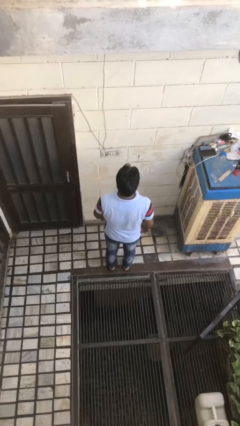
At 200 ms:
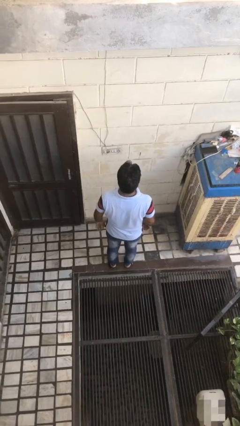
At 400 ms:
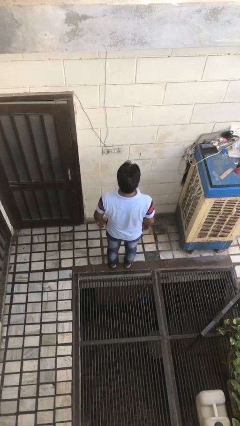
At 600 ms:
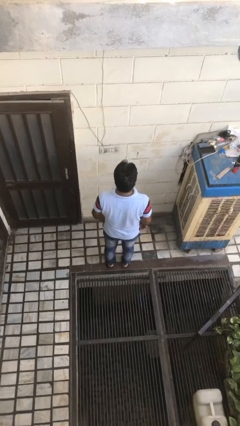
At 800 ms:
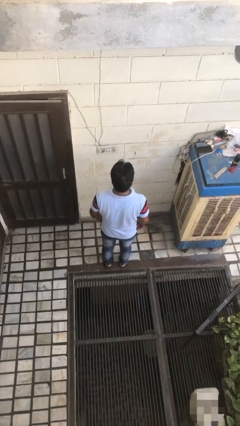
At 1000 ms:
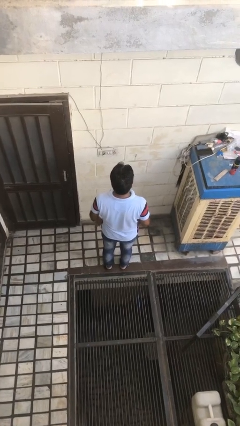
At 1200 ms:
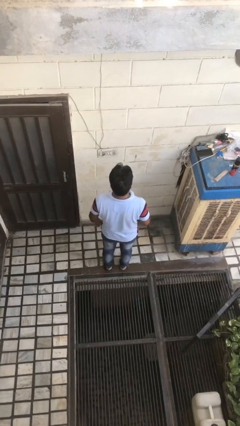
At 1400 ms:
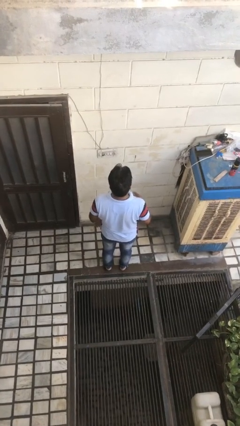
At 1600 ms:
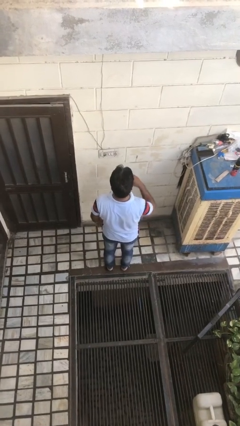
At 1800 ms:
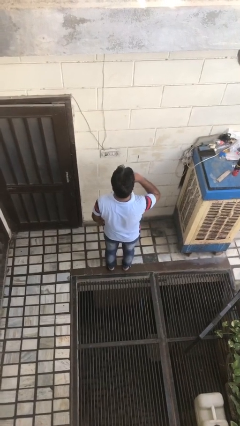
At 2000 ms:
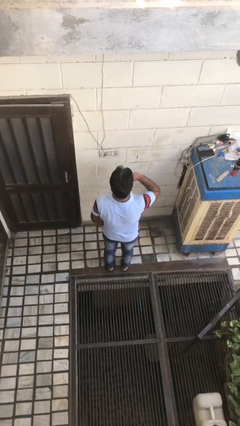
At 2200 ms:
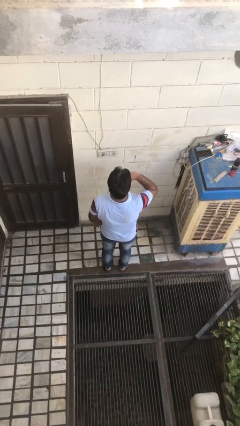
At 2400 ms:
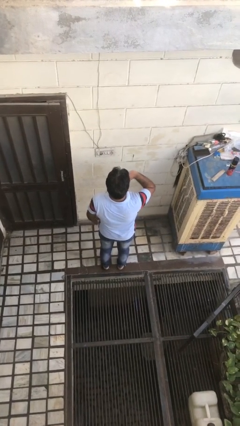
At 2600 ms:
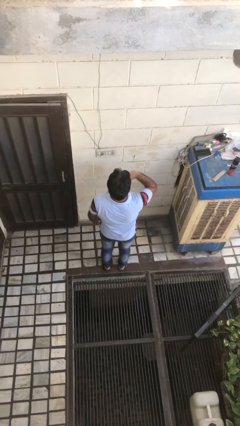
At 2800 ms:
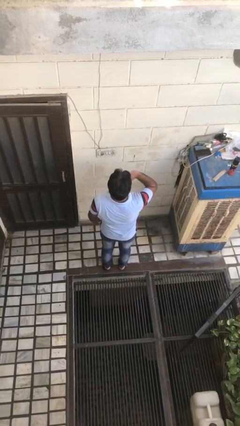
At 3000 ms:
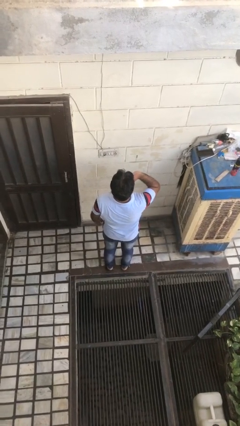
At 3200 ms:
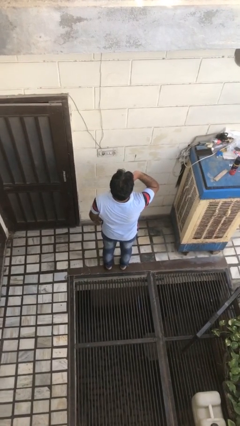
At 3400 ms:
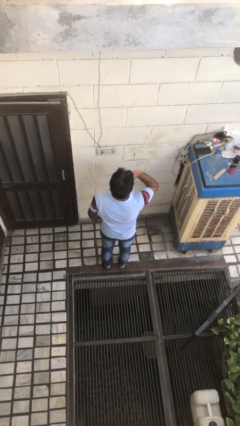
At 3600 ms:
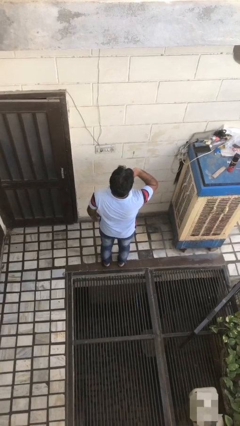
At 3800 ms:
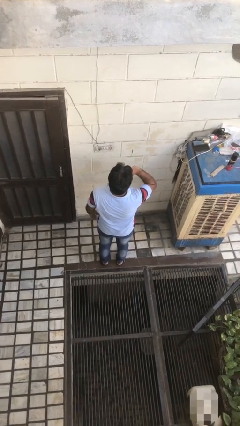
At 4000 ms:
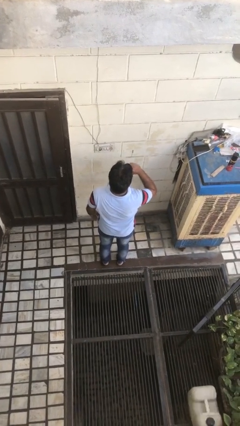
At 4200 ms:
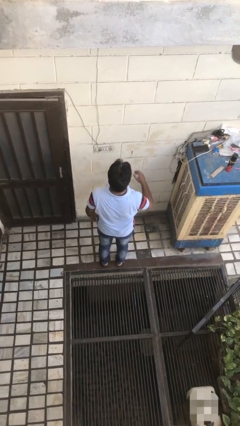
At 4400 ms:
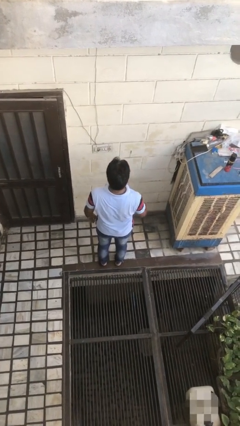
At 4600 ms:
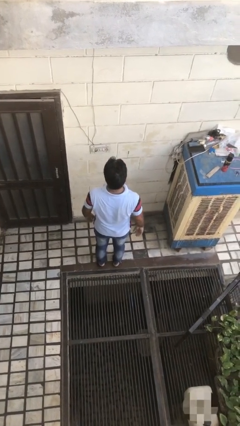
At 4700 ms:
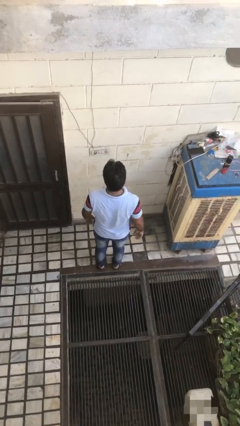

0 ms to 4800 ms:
person yawns

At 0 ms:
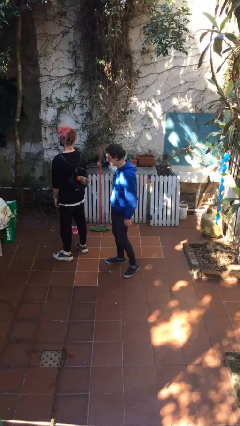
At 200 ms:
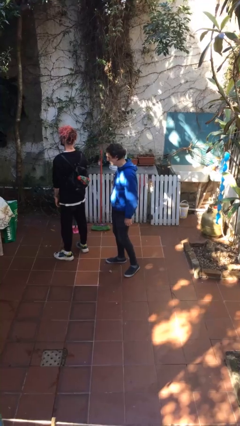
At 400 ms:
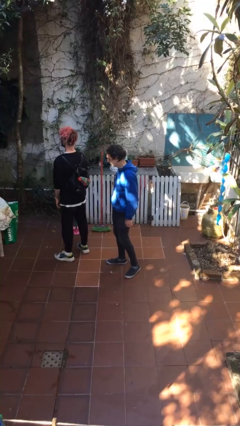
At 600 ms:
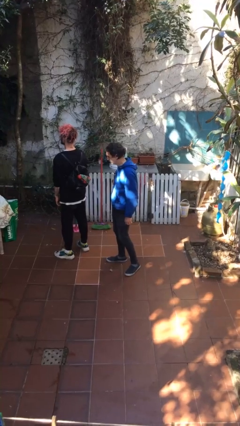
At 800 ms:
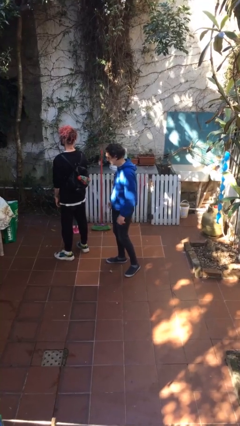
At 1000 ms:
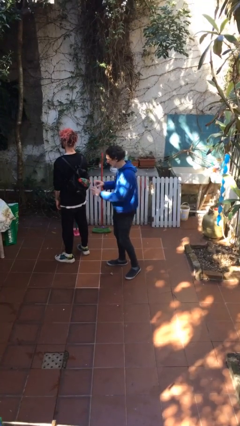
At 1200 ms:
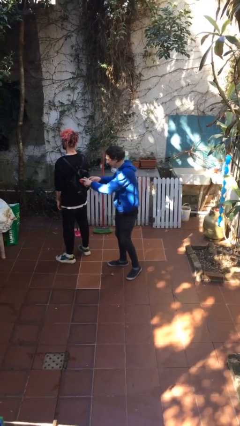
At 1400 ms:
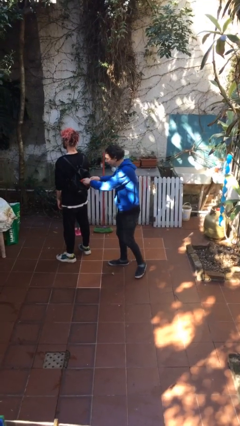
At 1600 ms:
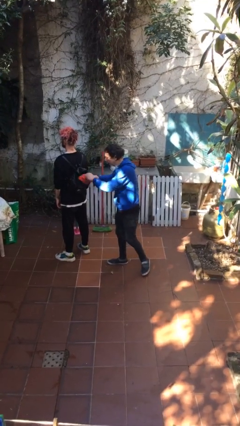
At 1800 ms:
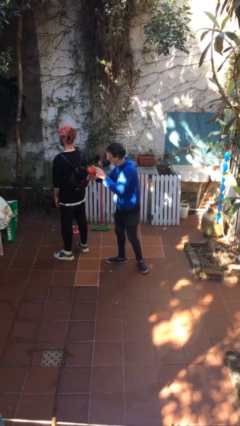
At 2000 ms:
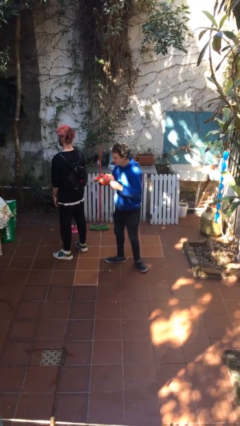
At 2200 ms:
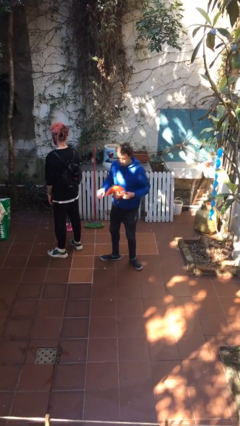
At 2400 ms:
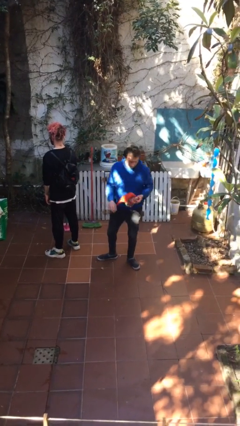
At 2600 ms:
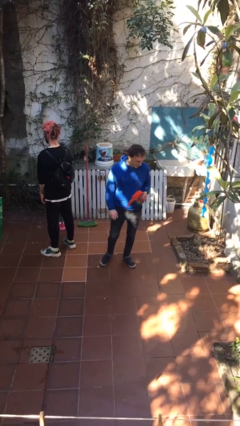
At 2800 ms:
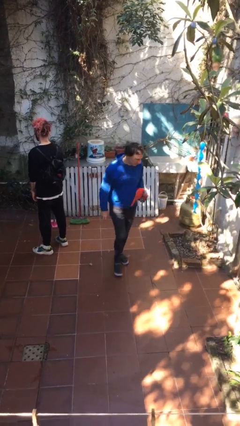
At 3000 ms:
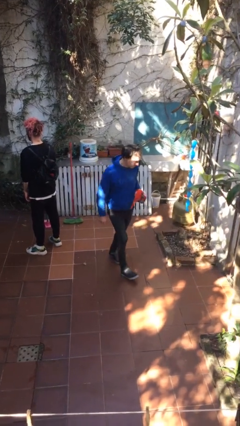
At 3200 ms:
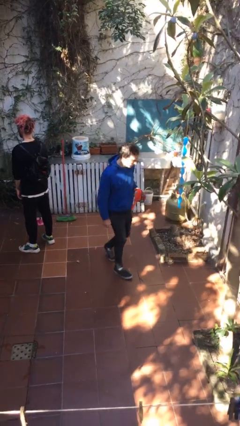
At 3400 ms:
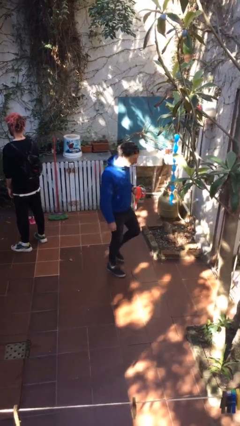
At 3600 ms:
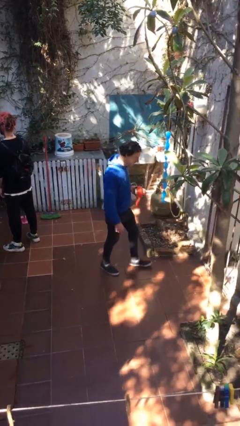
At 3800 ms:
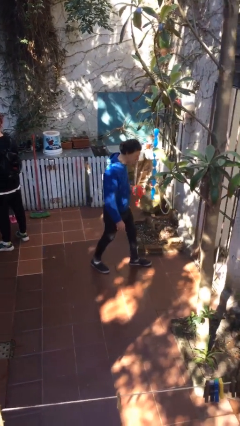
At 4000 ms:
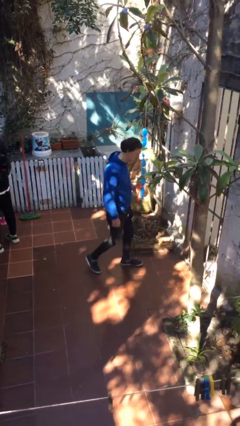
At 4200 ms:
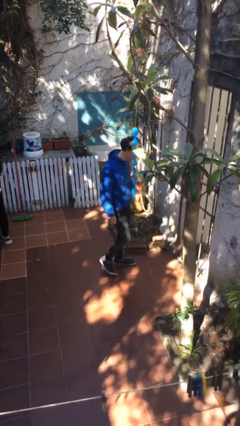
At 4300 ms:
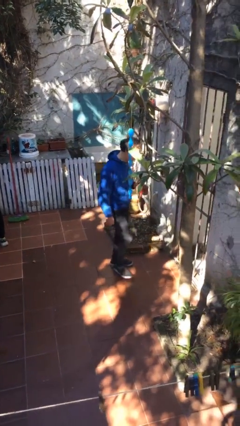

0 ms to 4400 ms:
person steals object from person

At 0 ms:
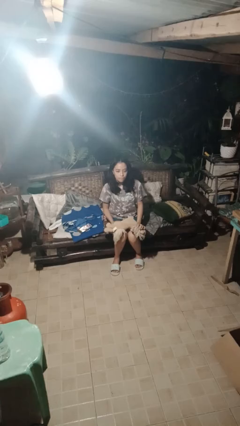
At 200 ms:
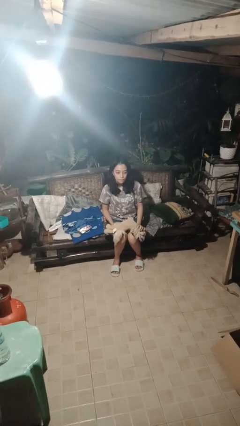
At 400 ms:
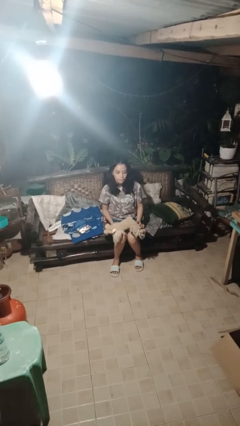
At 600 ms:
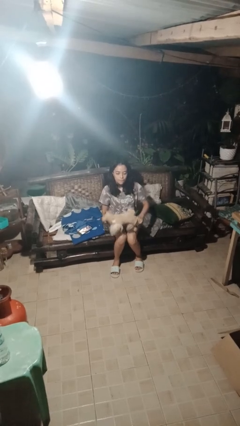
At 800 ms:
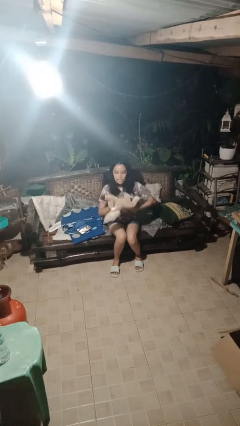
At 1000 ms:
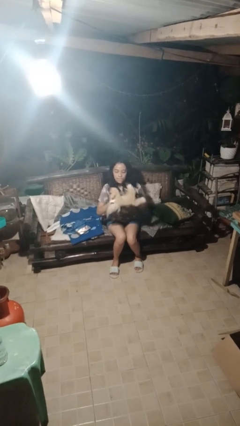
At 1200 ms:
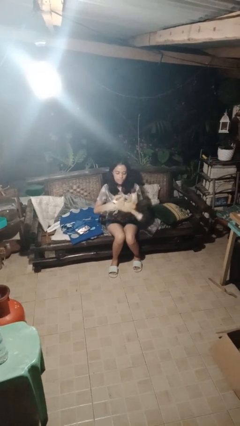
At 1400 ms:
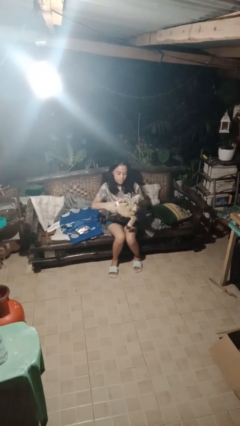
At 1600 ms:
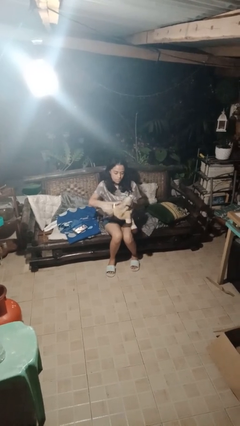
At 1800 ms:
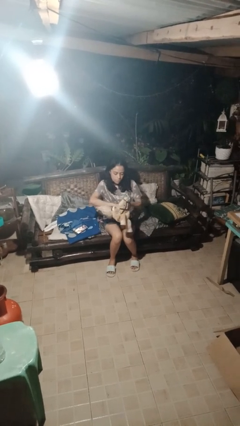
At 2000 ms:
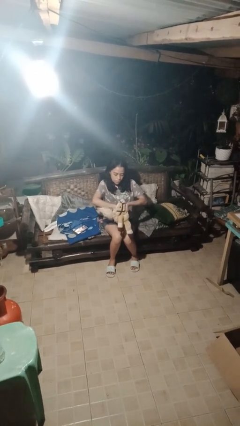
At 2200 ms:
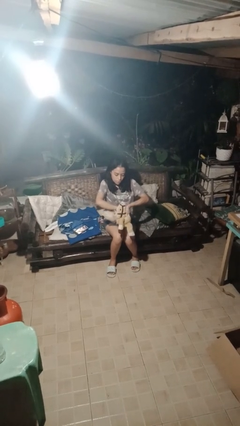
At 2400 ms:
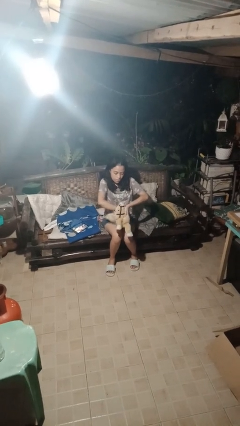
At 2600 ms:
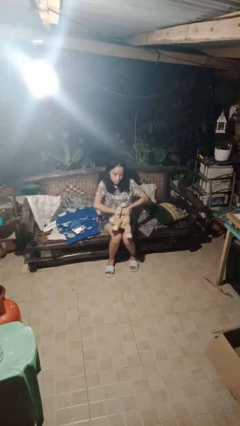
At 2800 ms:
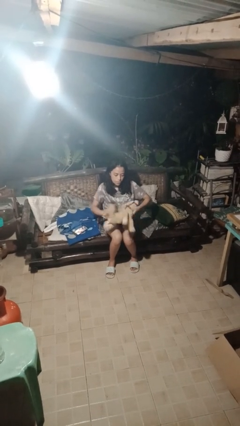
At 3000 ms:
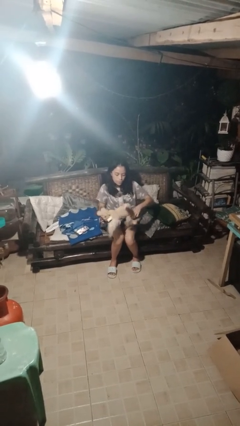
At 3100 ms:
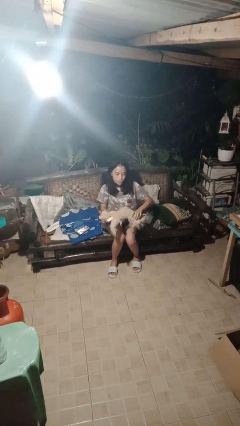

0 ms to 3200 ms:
person squeezes object

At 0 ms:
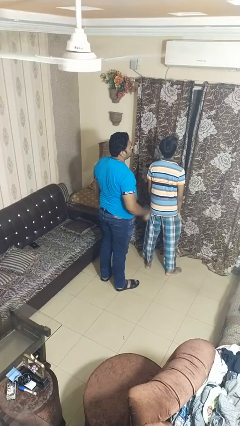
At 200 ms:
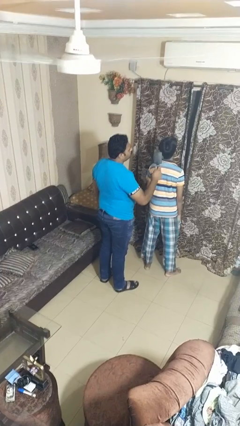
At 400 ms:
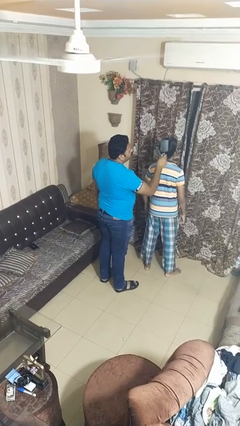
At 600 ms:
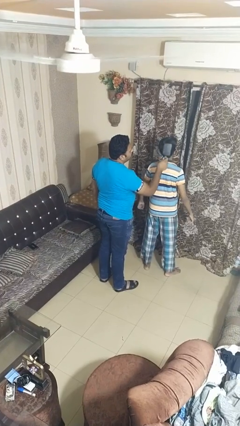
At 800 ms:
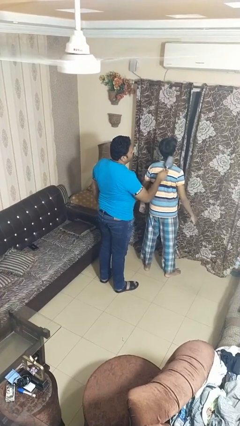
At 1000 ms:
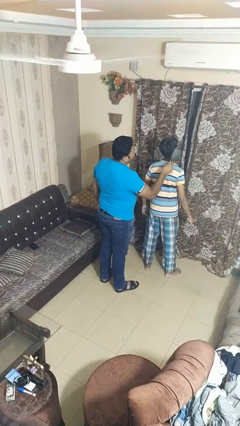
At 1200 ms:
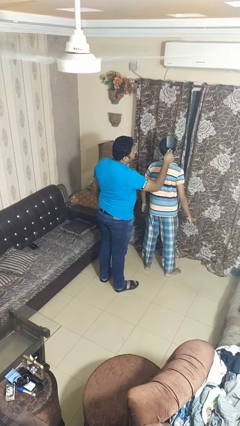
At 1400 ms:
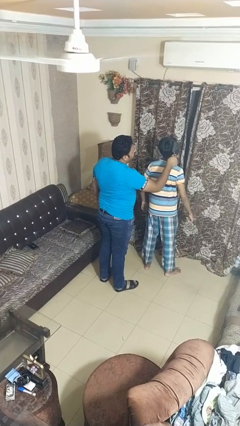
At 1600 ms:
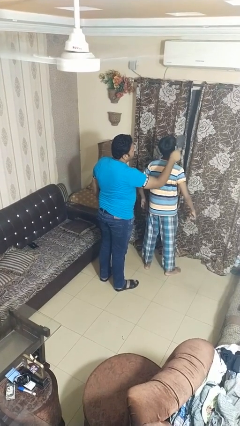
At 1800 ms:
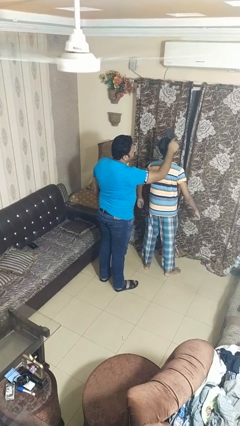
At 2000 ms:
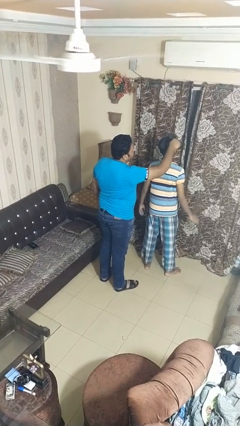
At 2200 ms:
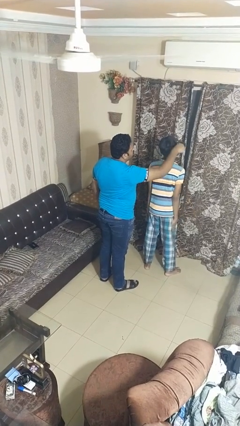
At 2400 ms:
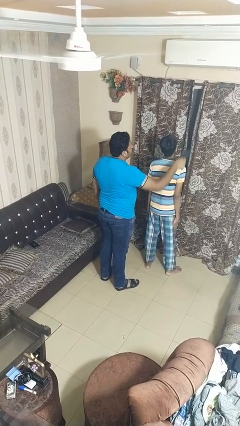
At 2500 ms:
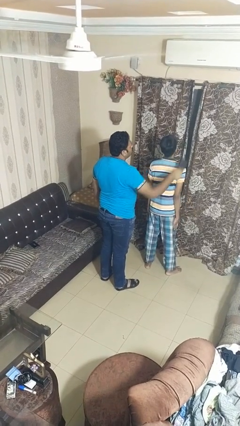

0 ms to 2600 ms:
person brushes hair of person

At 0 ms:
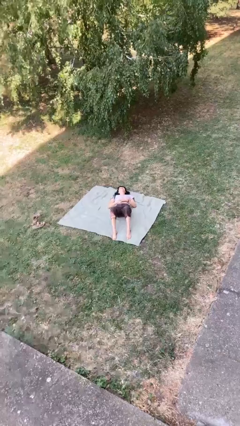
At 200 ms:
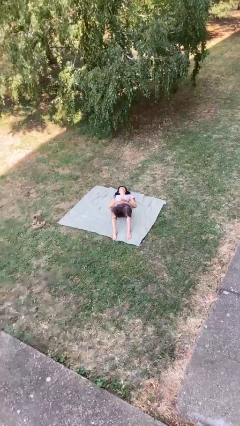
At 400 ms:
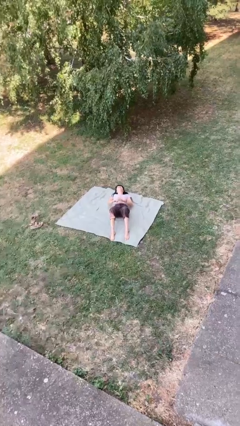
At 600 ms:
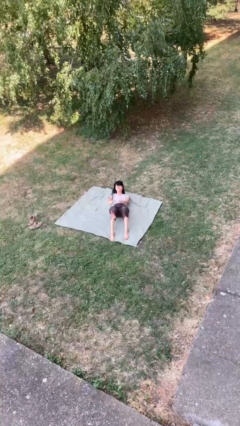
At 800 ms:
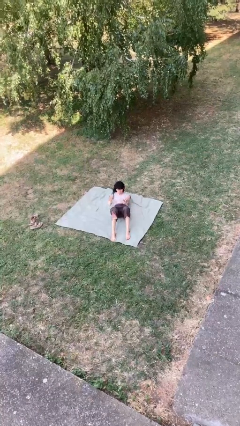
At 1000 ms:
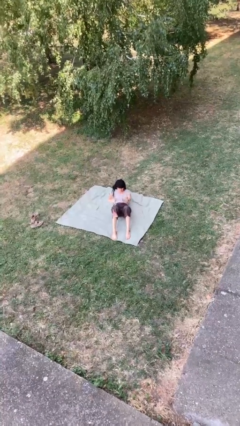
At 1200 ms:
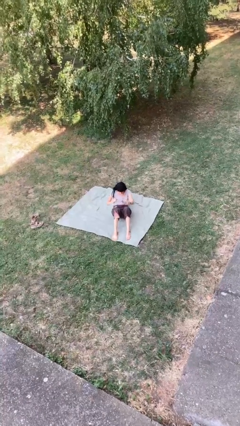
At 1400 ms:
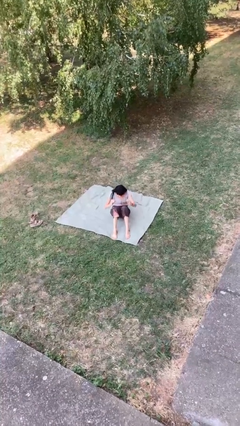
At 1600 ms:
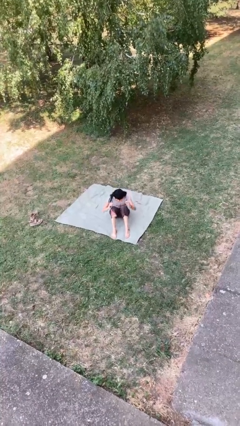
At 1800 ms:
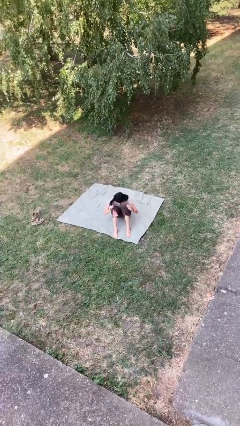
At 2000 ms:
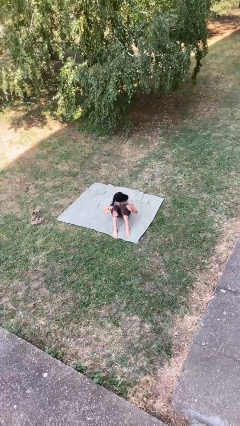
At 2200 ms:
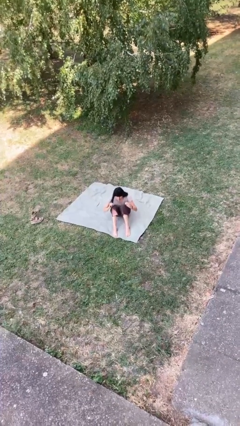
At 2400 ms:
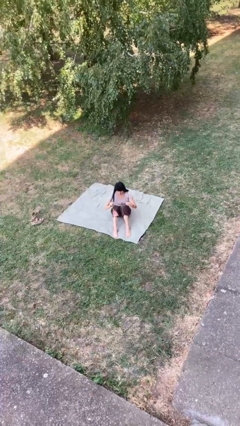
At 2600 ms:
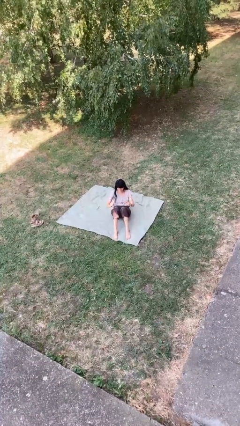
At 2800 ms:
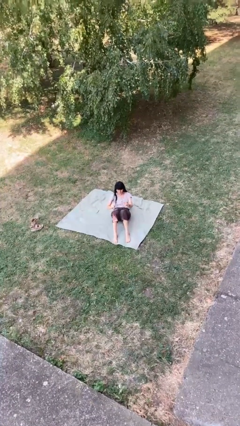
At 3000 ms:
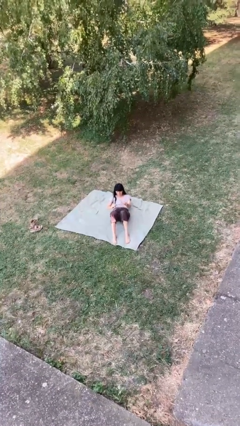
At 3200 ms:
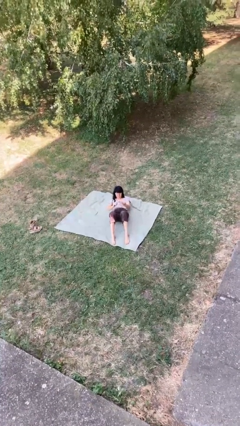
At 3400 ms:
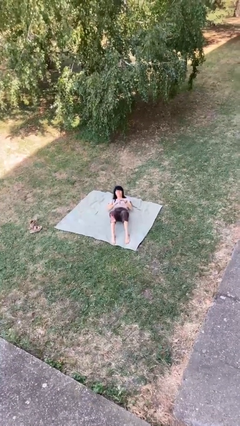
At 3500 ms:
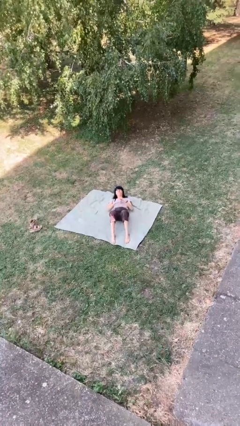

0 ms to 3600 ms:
person exercises with situp
